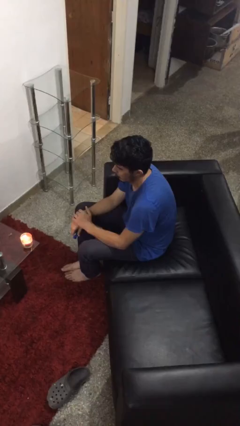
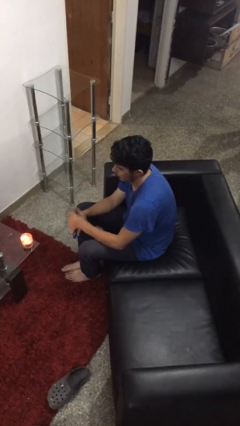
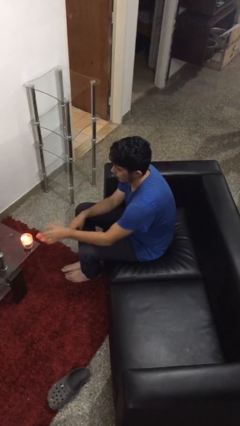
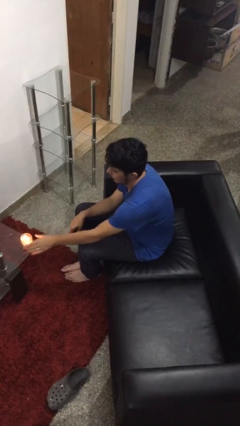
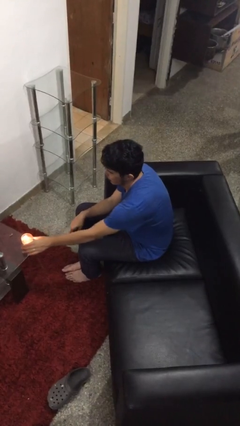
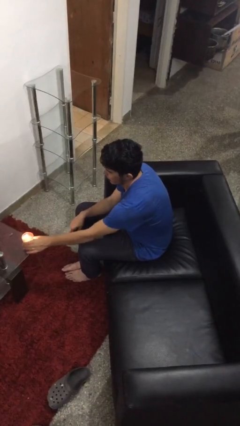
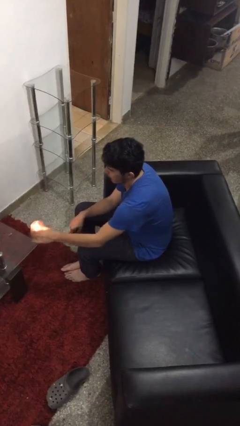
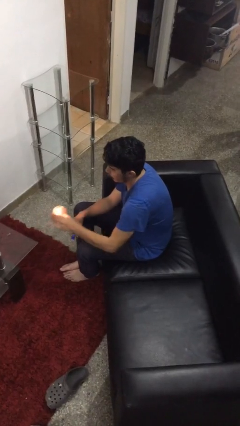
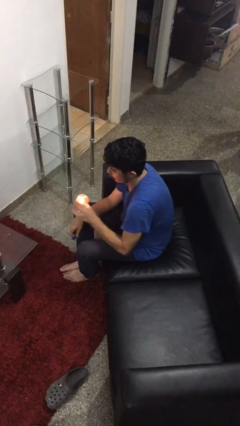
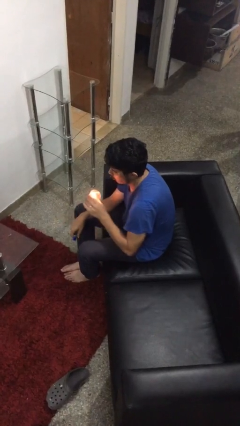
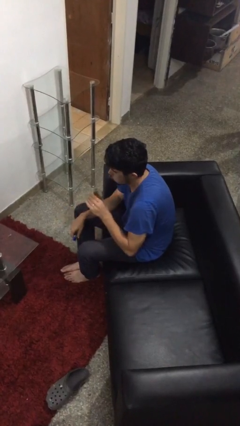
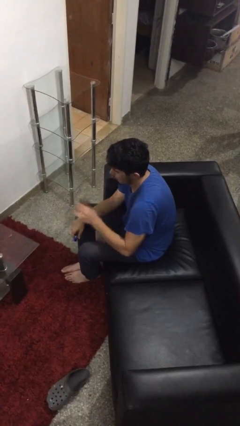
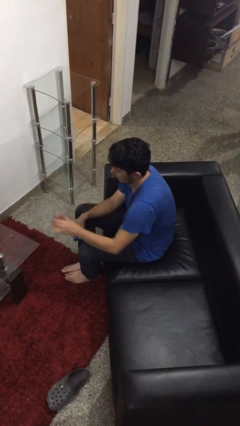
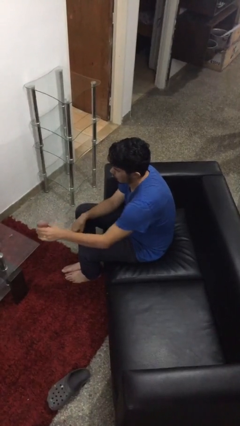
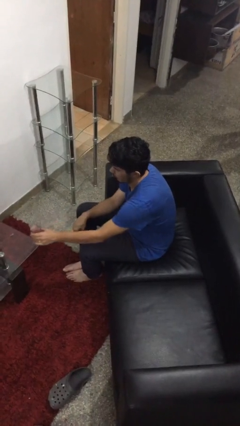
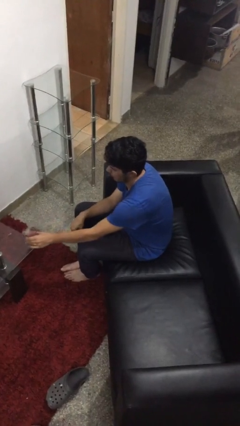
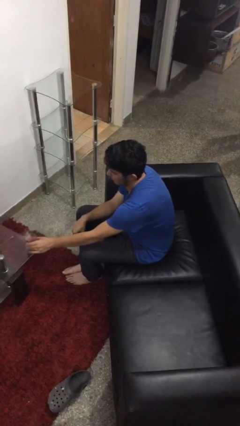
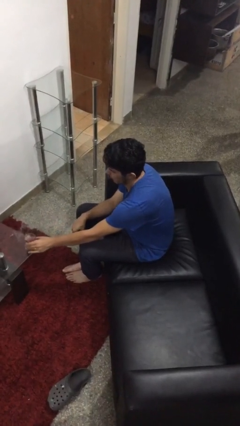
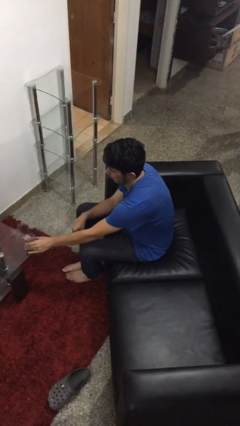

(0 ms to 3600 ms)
person extinguishes candle

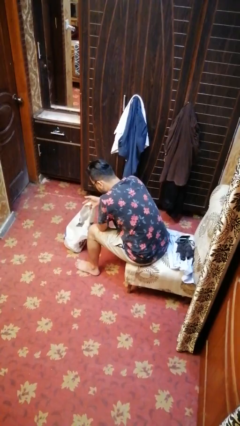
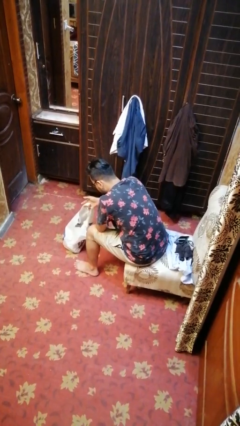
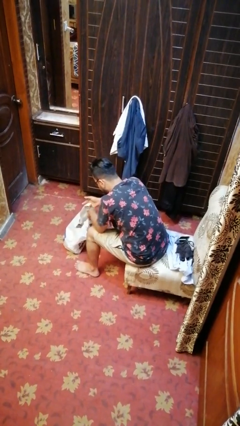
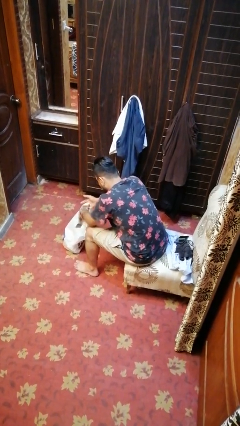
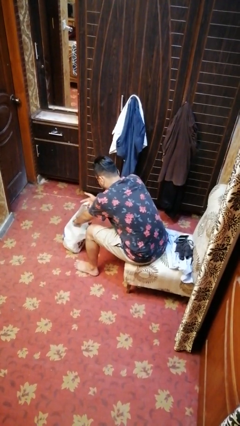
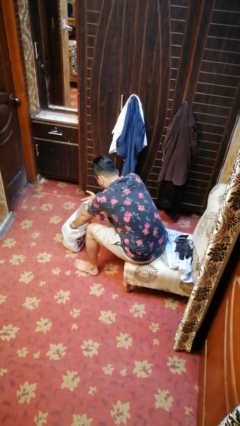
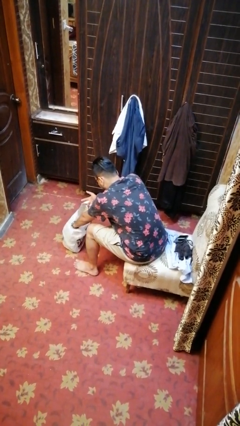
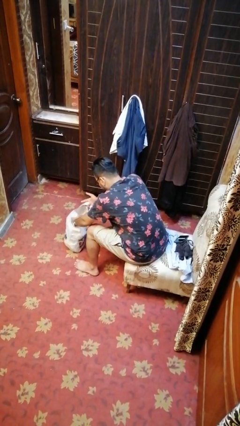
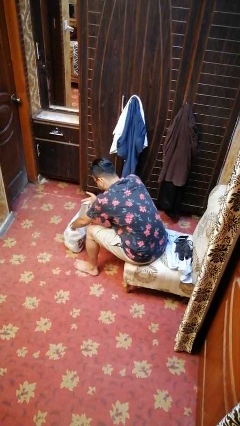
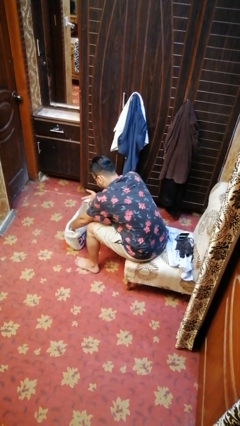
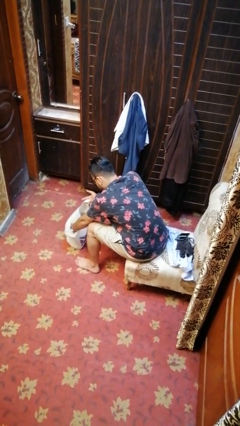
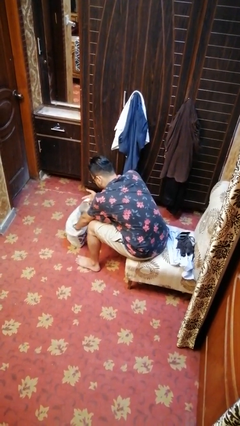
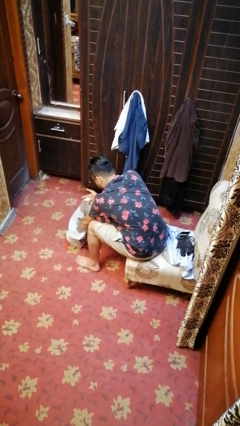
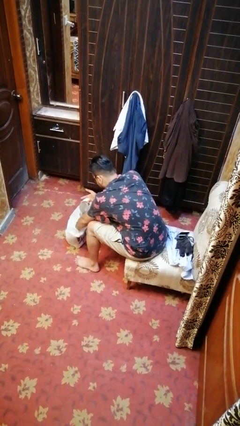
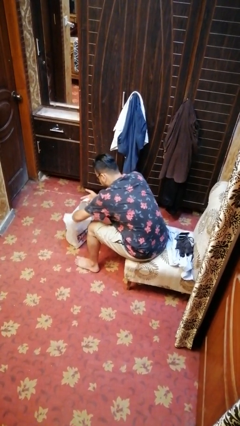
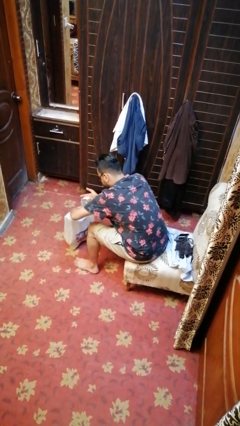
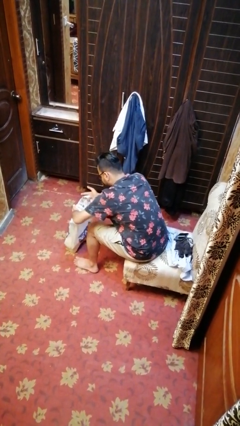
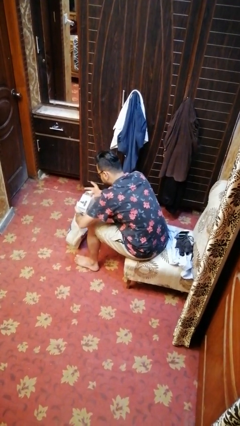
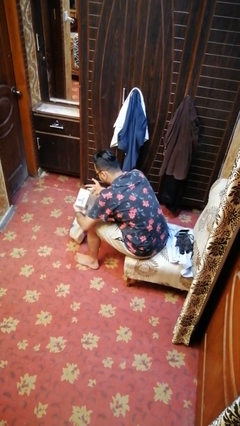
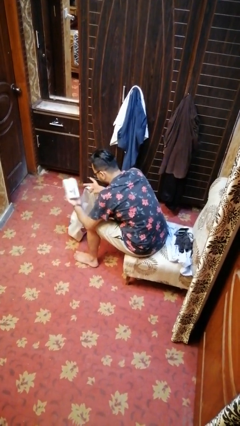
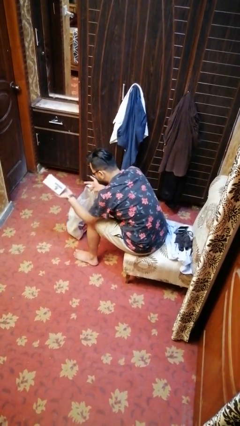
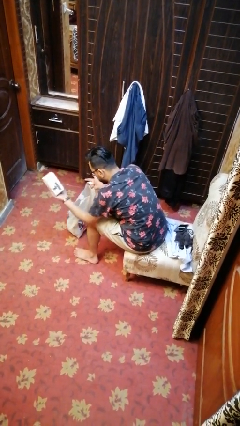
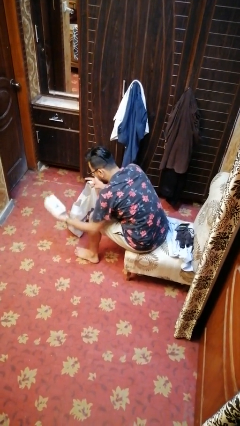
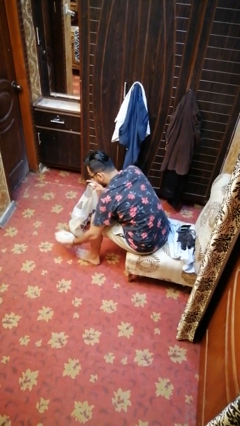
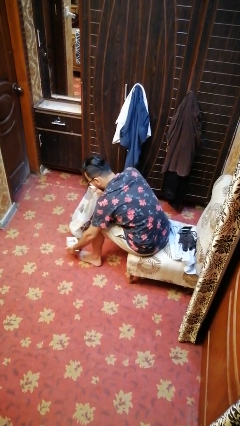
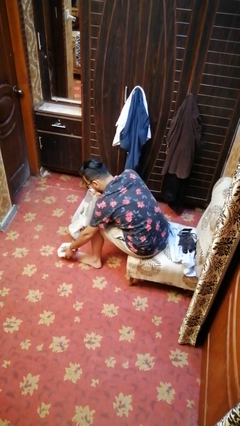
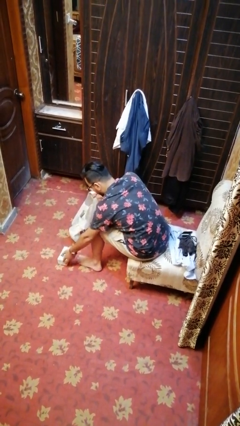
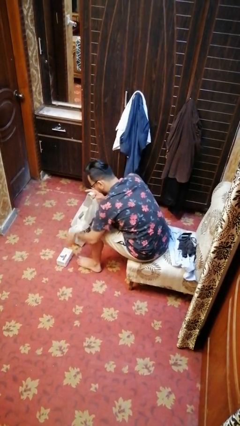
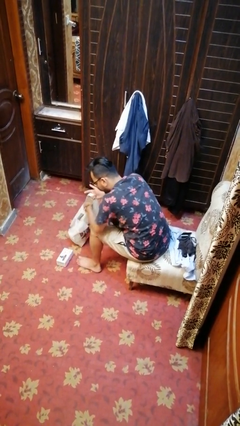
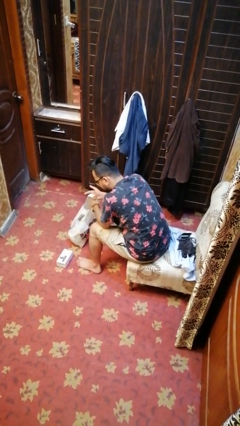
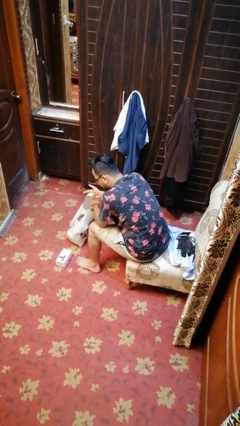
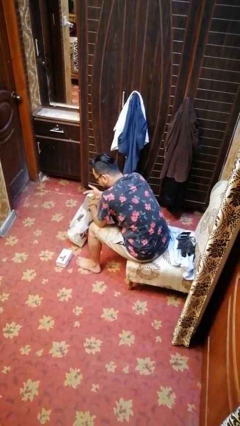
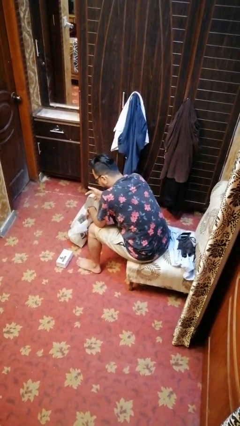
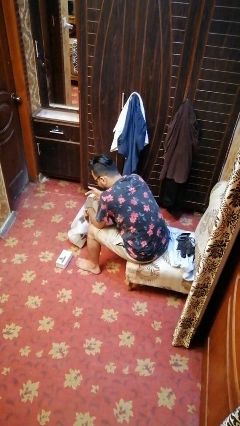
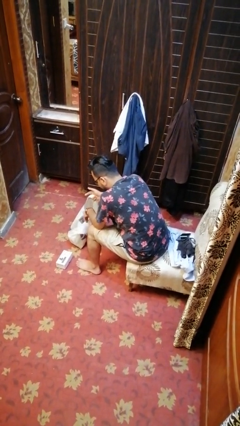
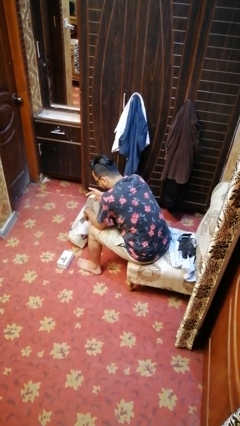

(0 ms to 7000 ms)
person takes object from bag

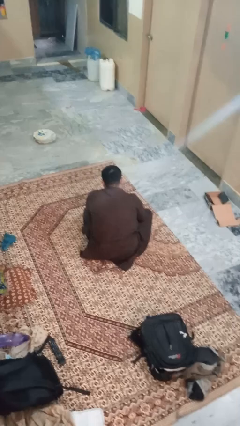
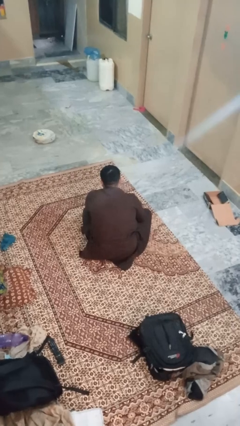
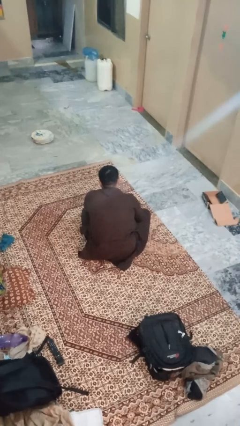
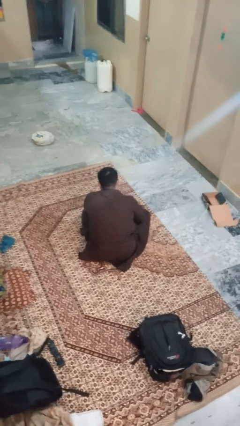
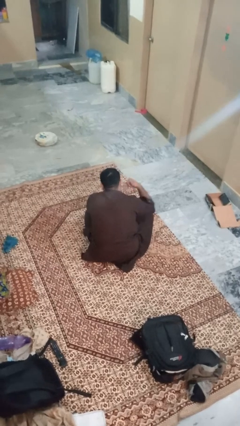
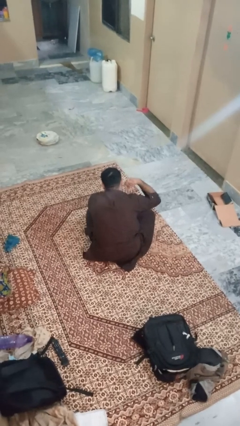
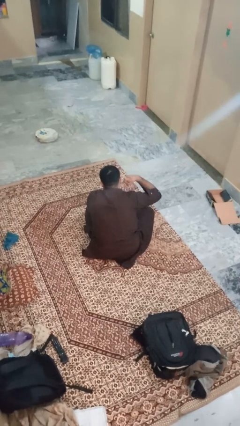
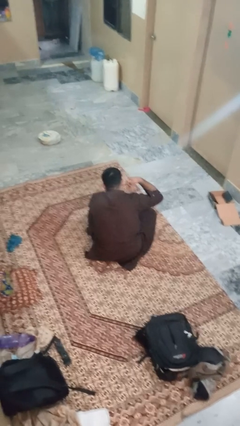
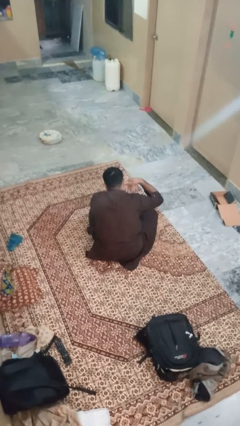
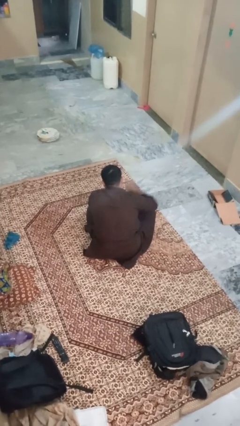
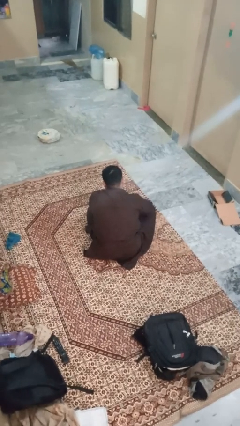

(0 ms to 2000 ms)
person gestures call me

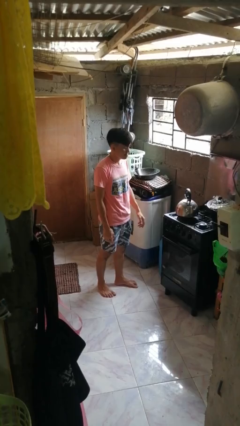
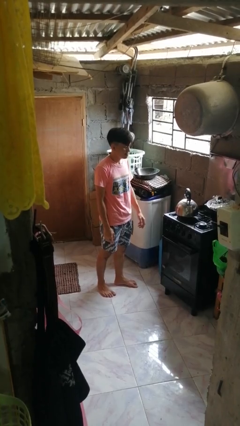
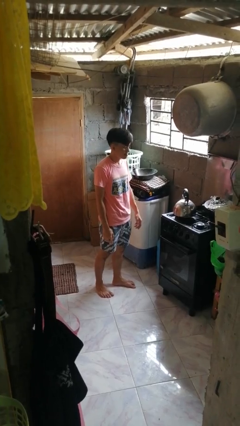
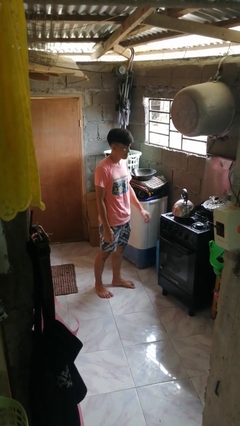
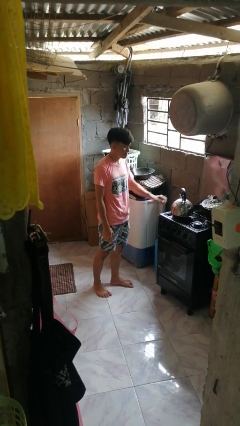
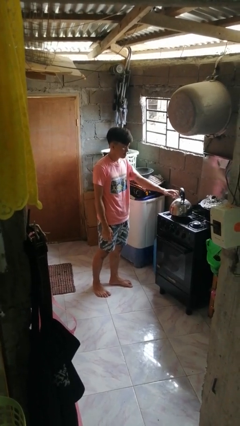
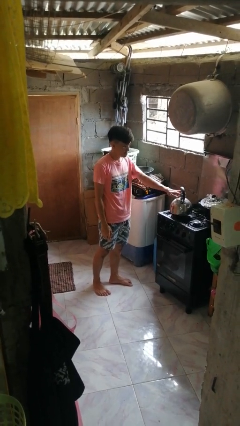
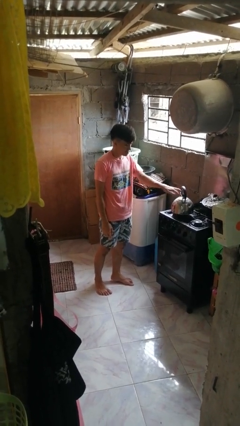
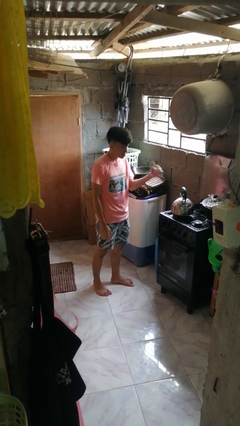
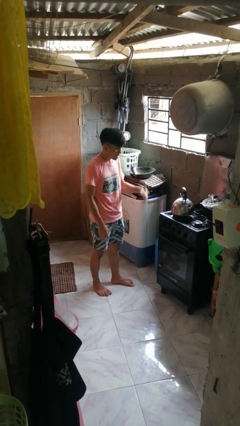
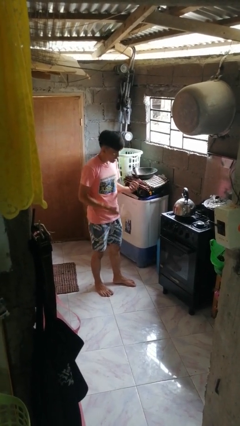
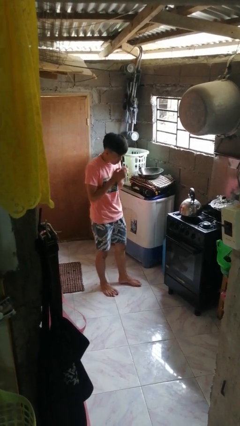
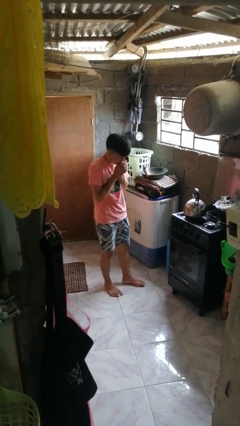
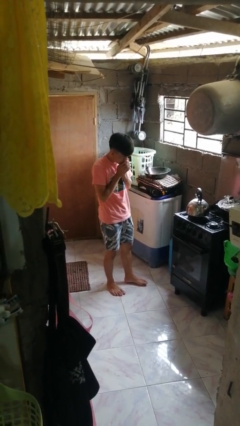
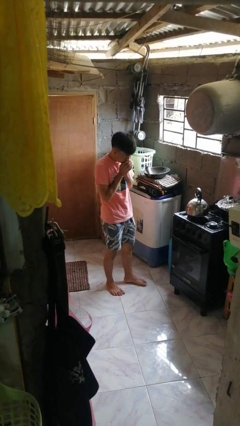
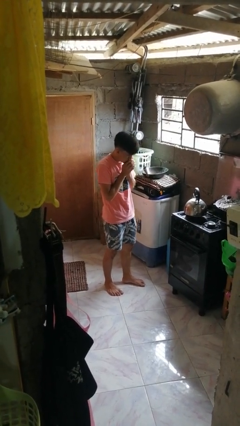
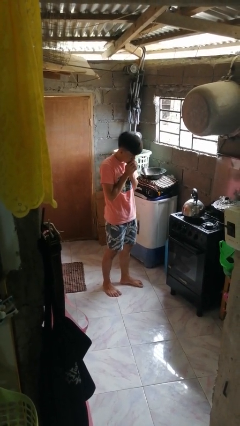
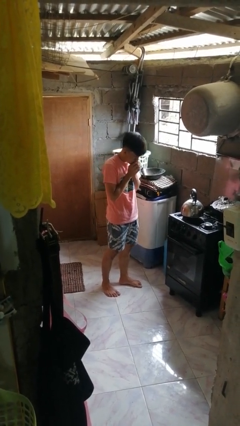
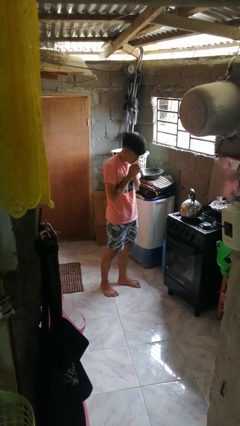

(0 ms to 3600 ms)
person burns hand

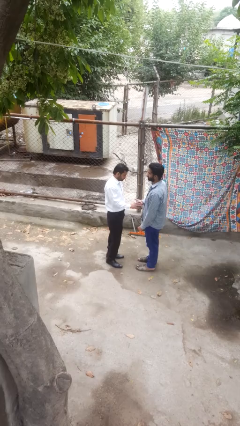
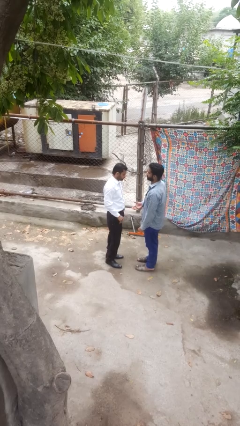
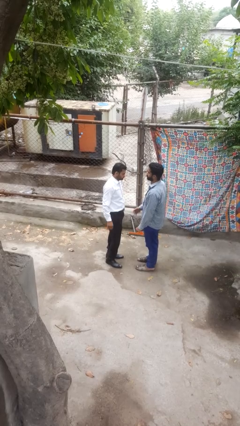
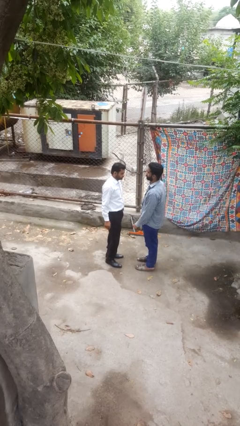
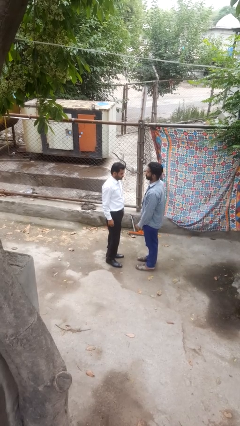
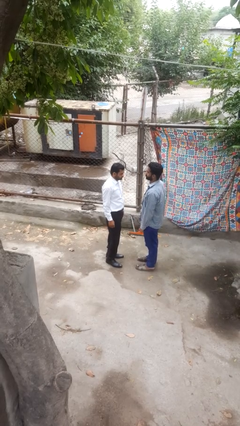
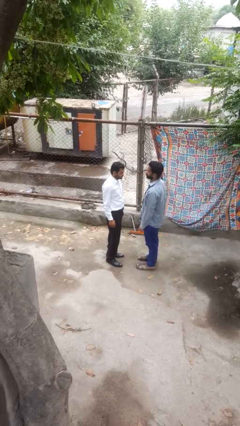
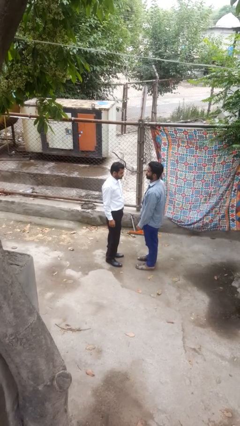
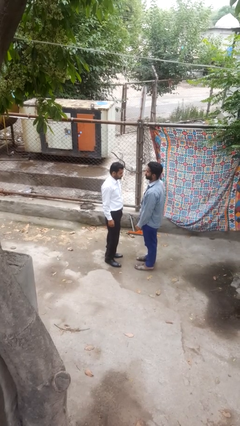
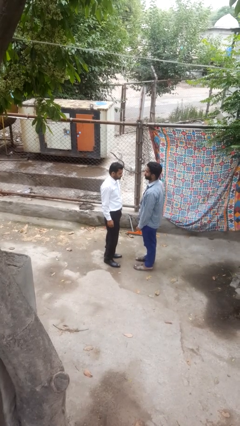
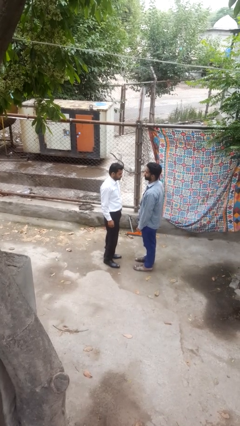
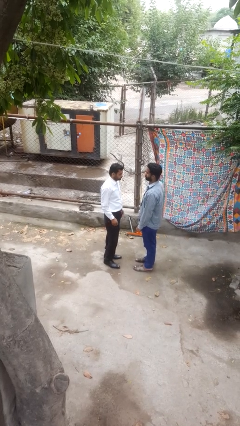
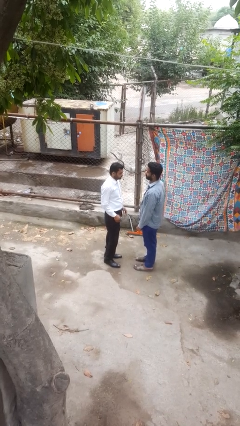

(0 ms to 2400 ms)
person highfives hand
